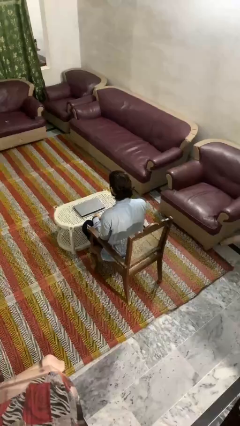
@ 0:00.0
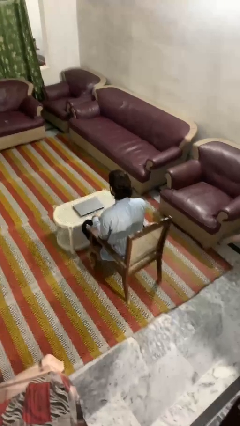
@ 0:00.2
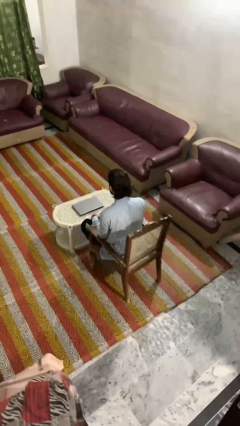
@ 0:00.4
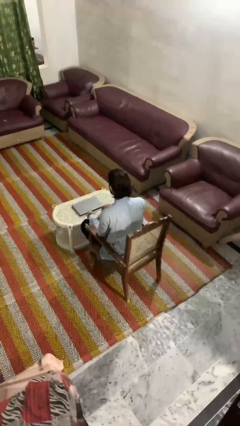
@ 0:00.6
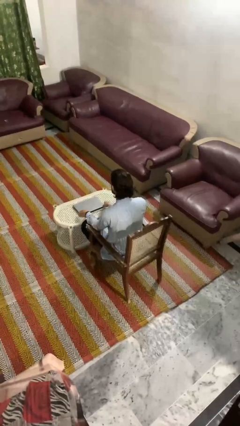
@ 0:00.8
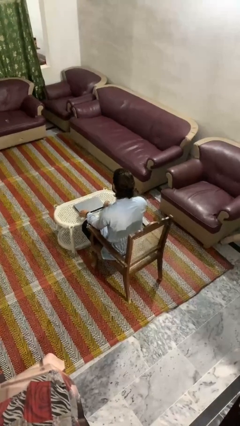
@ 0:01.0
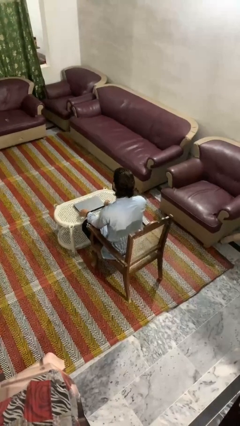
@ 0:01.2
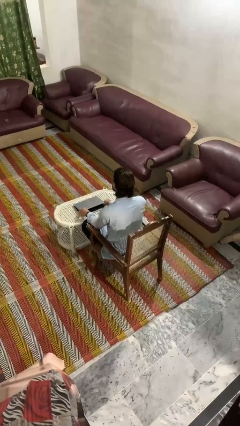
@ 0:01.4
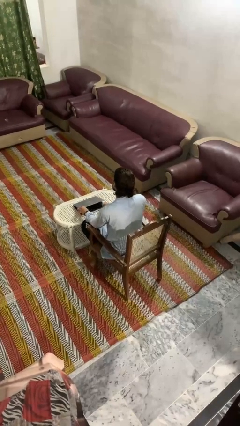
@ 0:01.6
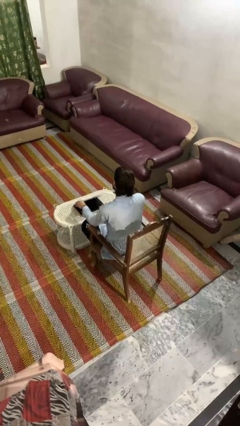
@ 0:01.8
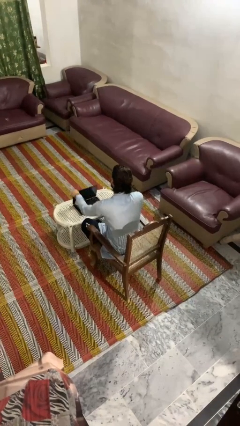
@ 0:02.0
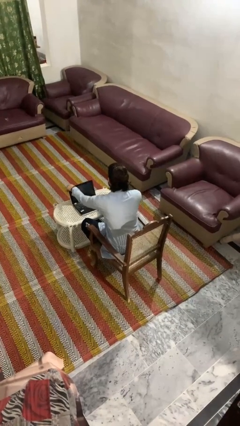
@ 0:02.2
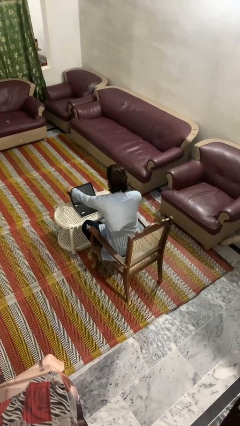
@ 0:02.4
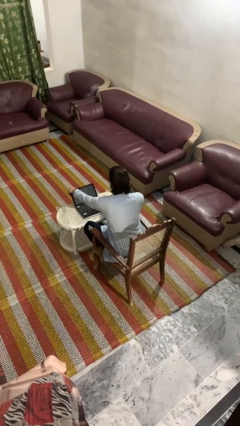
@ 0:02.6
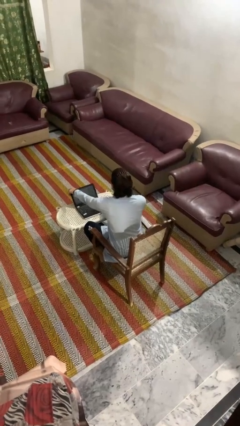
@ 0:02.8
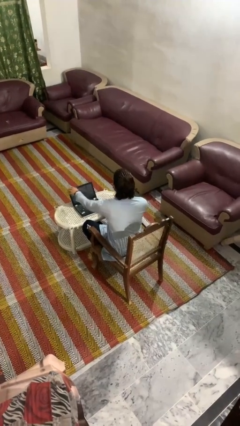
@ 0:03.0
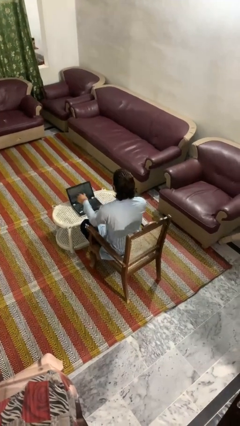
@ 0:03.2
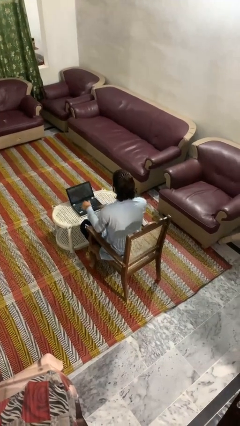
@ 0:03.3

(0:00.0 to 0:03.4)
person opens laptop

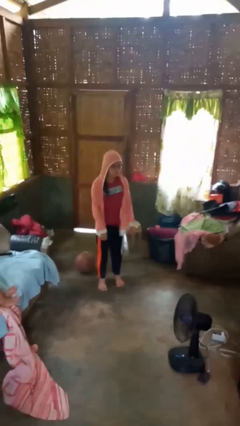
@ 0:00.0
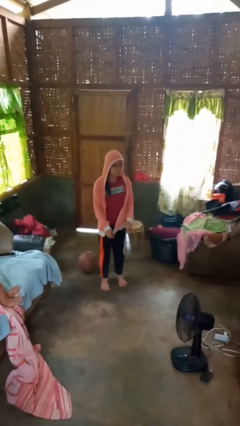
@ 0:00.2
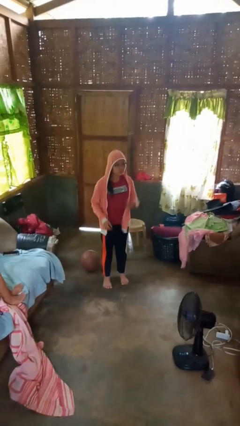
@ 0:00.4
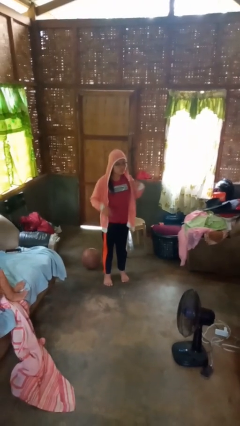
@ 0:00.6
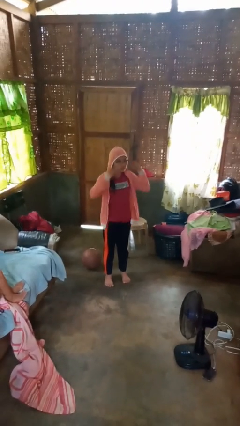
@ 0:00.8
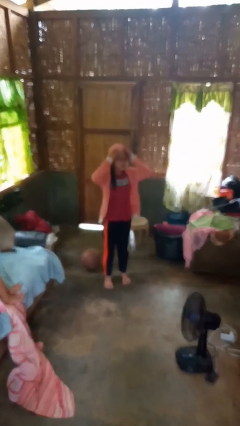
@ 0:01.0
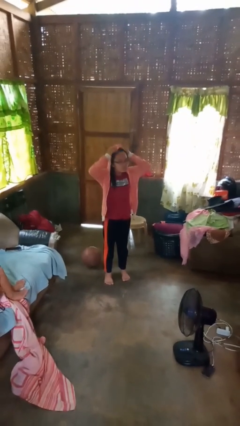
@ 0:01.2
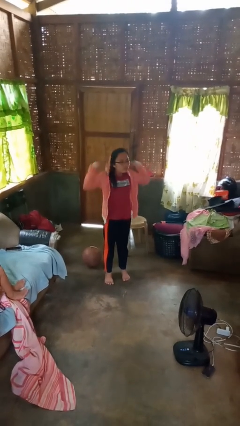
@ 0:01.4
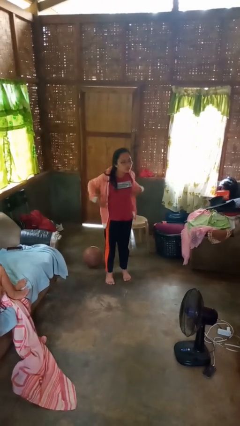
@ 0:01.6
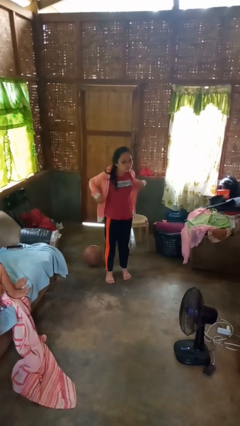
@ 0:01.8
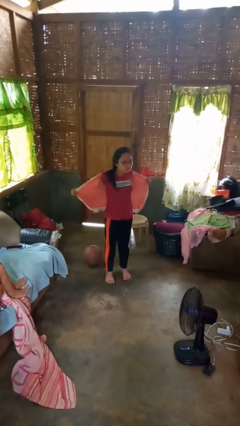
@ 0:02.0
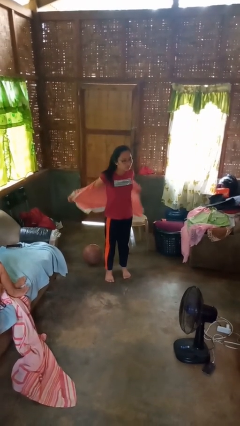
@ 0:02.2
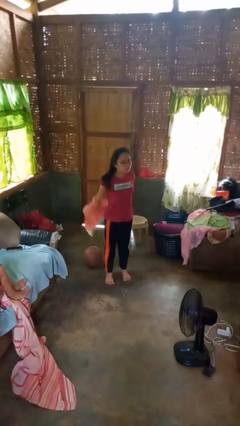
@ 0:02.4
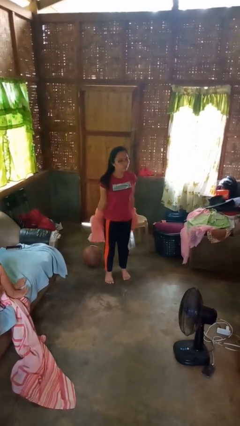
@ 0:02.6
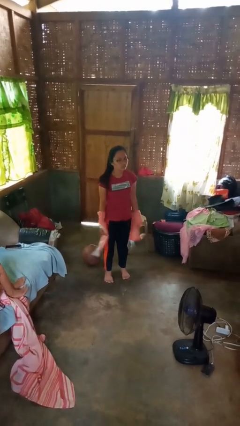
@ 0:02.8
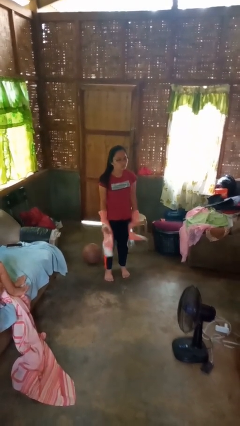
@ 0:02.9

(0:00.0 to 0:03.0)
person takes off hoodie

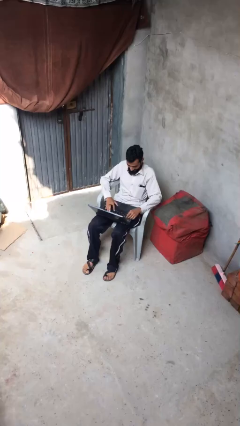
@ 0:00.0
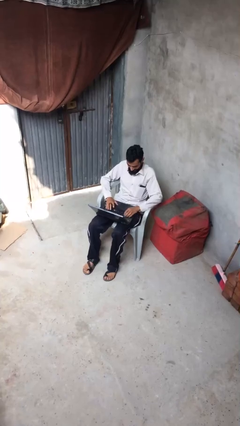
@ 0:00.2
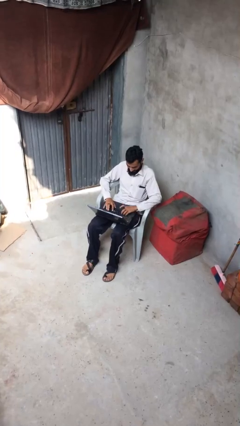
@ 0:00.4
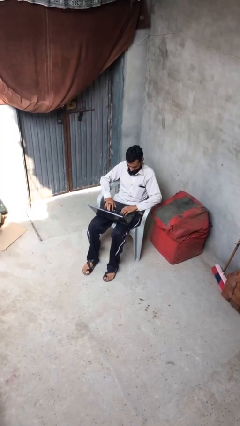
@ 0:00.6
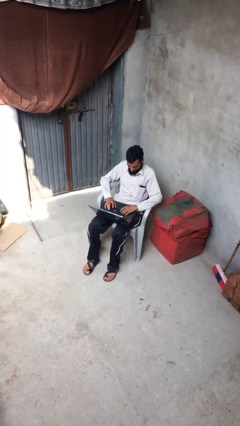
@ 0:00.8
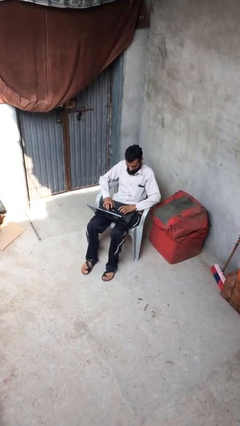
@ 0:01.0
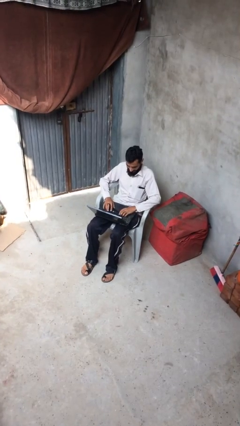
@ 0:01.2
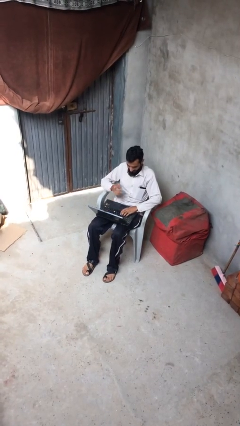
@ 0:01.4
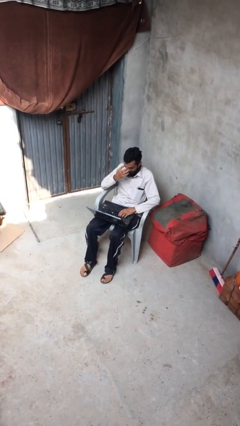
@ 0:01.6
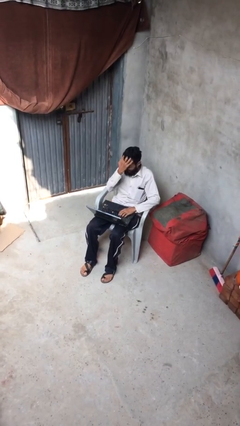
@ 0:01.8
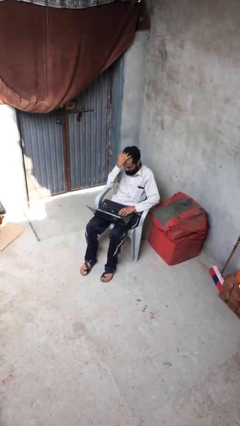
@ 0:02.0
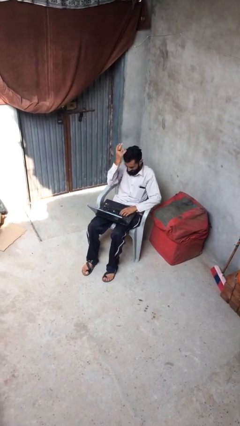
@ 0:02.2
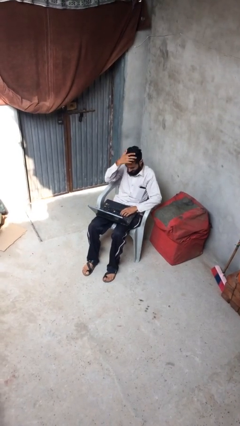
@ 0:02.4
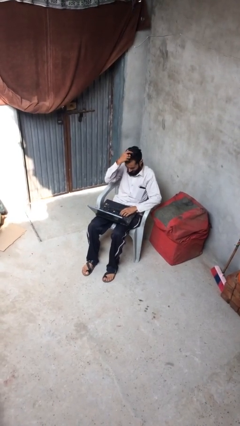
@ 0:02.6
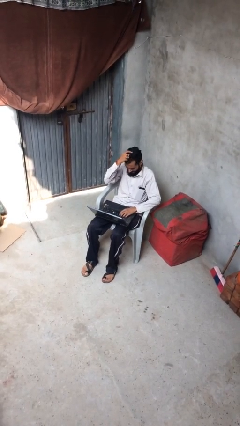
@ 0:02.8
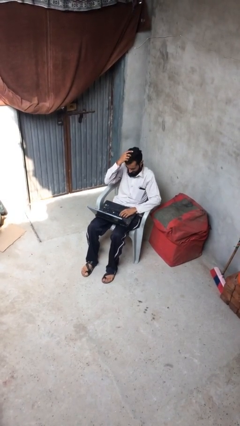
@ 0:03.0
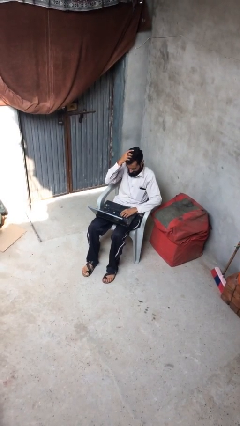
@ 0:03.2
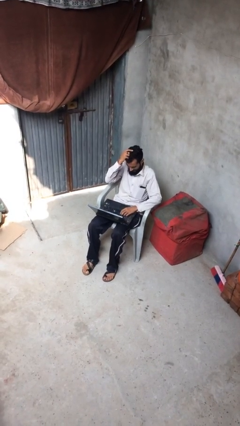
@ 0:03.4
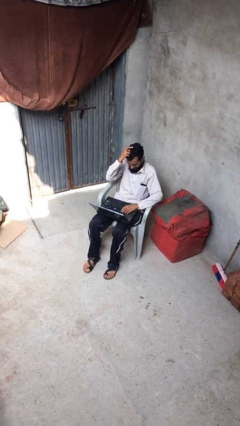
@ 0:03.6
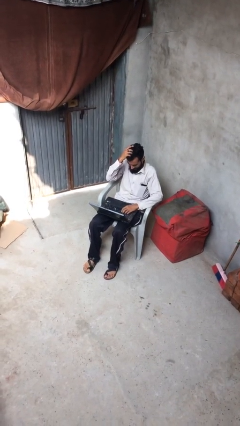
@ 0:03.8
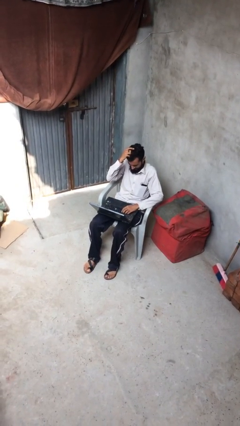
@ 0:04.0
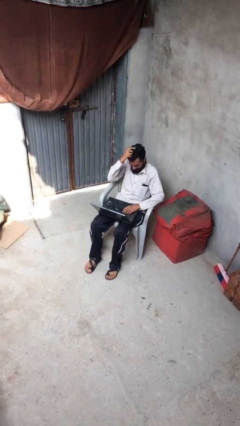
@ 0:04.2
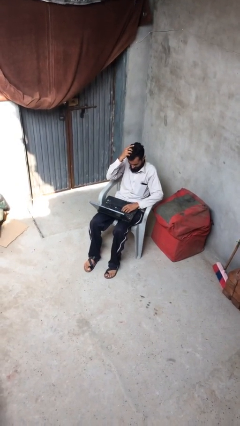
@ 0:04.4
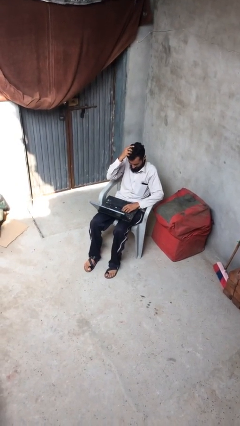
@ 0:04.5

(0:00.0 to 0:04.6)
person interacts with laptop

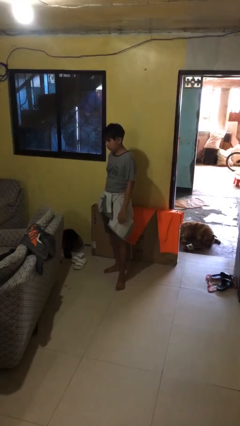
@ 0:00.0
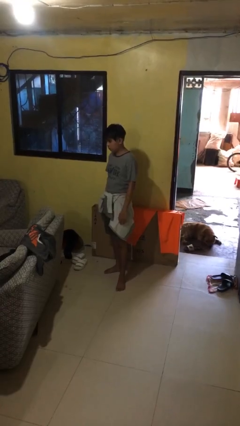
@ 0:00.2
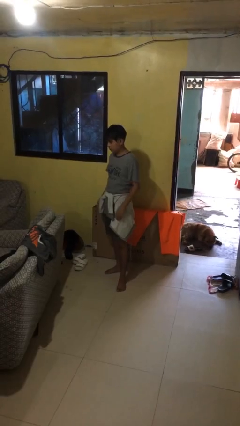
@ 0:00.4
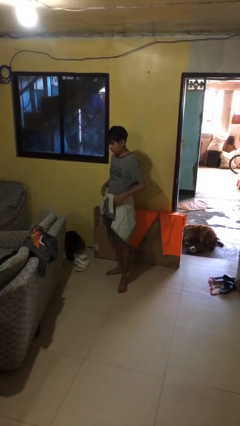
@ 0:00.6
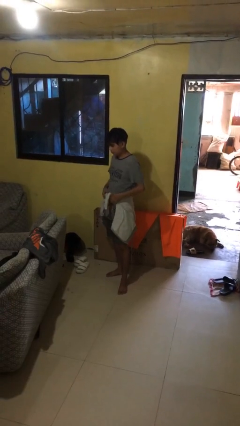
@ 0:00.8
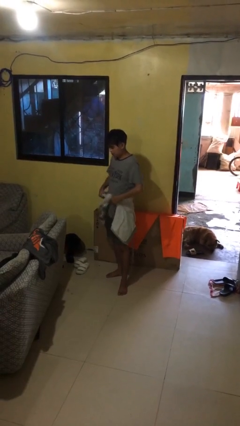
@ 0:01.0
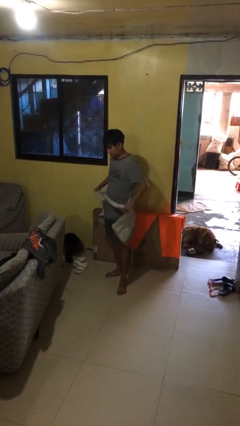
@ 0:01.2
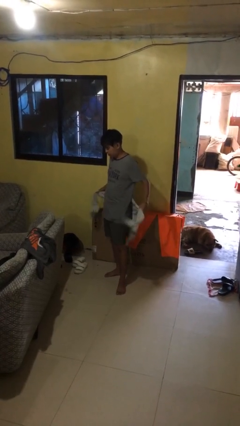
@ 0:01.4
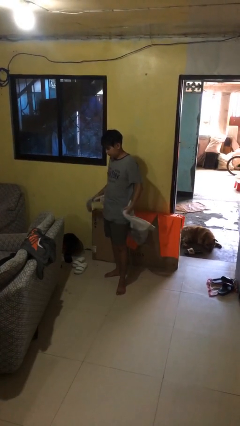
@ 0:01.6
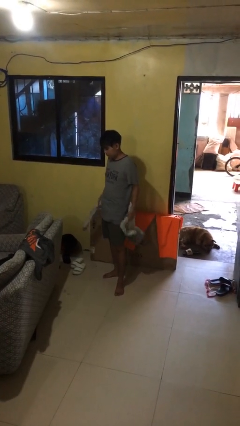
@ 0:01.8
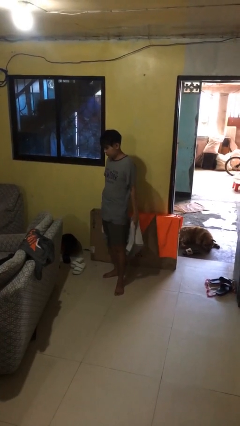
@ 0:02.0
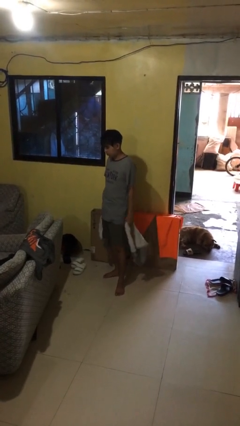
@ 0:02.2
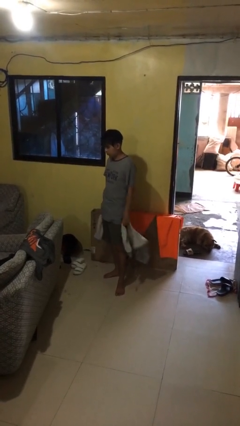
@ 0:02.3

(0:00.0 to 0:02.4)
person unties jacket around waist

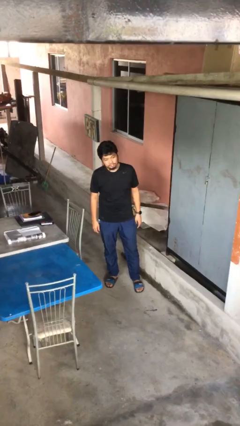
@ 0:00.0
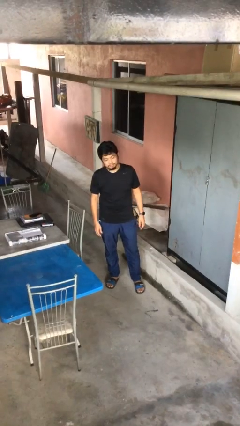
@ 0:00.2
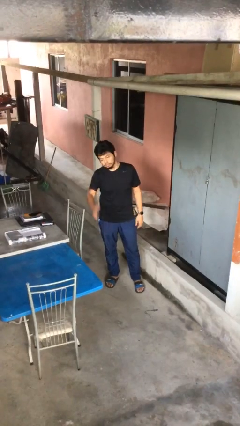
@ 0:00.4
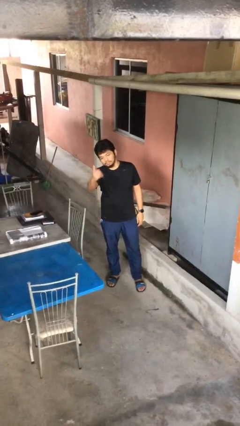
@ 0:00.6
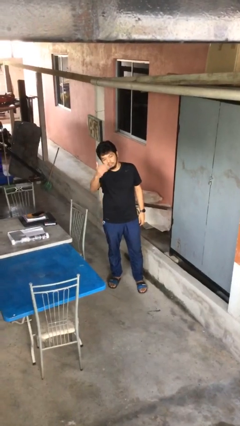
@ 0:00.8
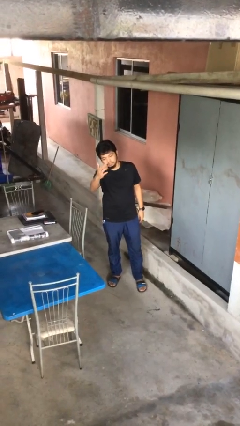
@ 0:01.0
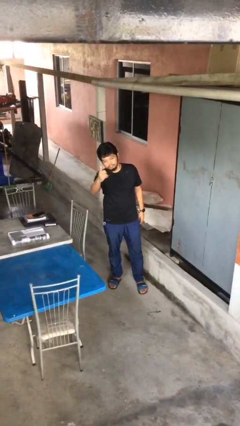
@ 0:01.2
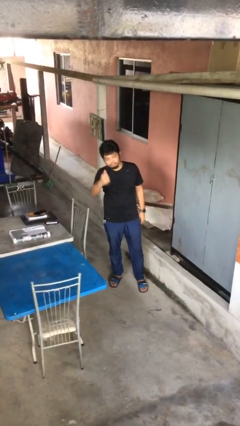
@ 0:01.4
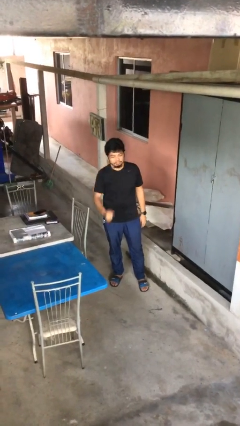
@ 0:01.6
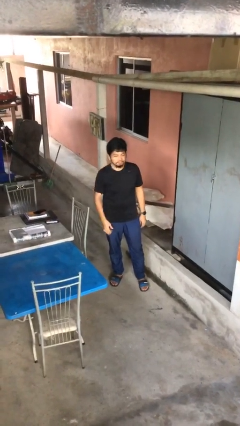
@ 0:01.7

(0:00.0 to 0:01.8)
person gestures come here

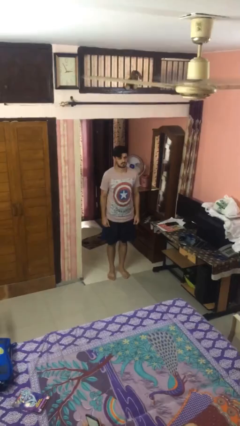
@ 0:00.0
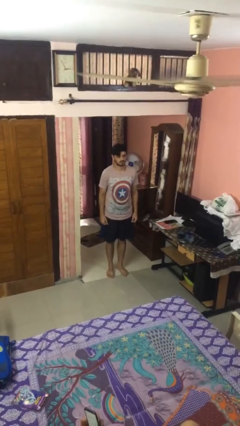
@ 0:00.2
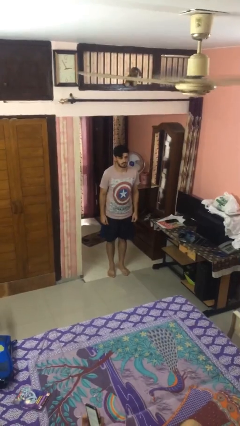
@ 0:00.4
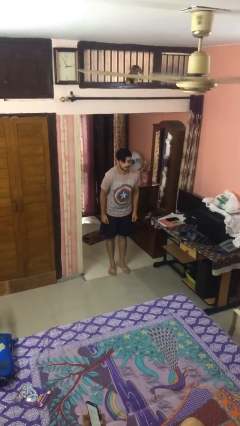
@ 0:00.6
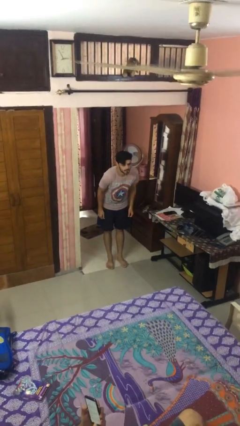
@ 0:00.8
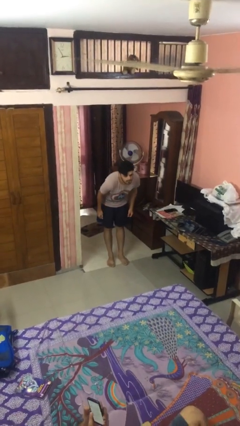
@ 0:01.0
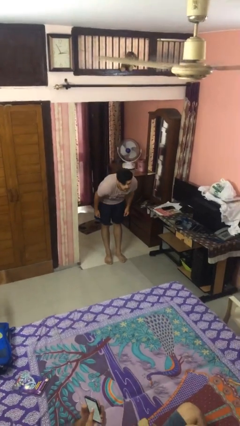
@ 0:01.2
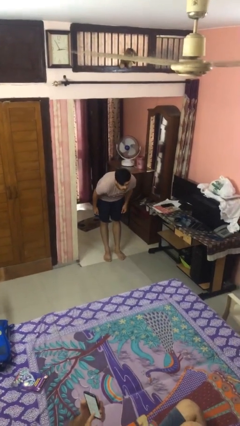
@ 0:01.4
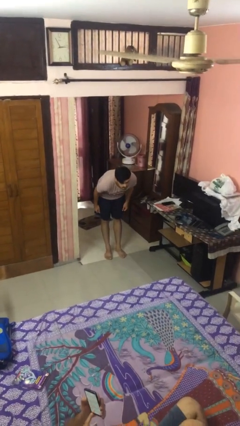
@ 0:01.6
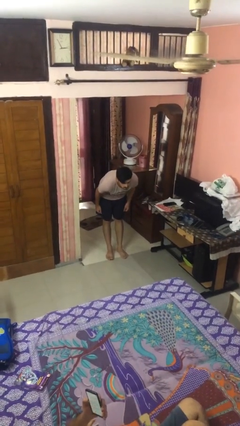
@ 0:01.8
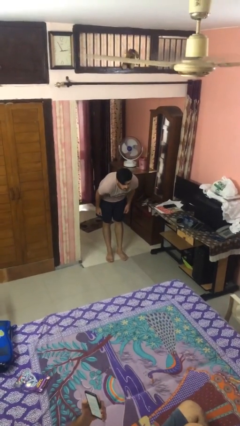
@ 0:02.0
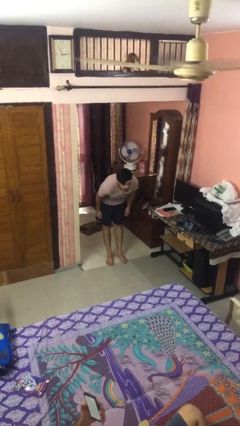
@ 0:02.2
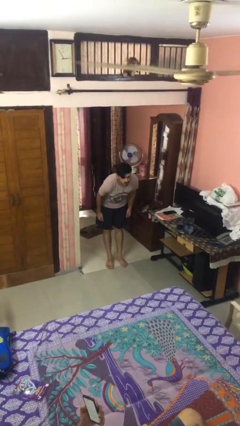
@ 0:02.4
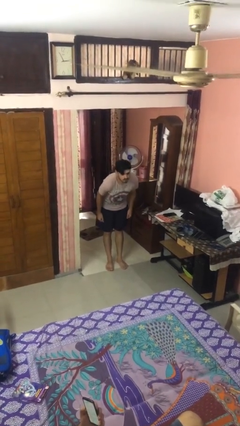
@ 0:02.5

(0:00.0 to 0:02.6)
person bows
